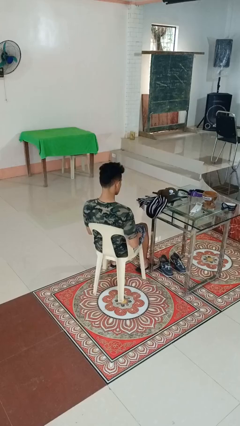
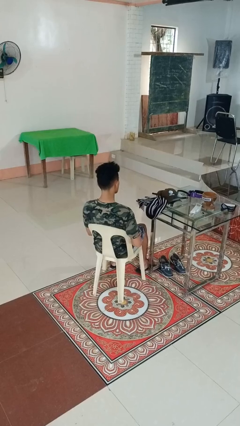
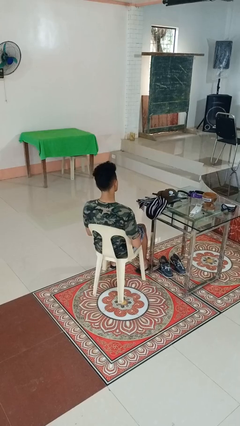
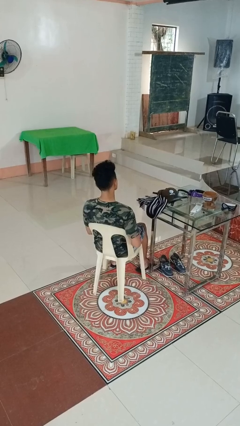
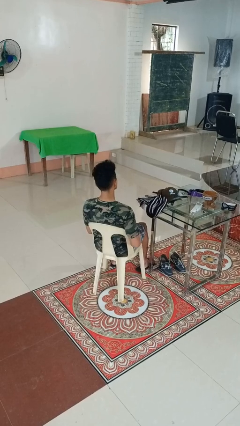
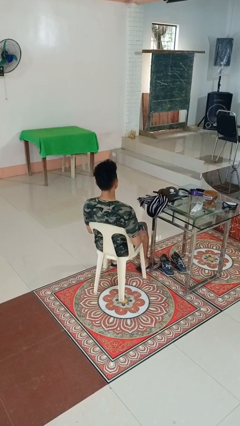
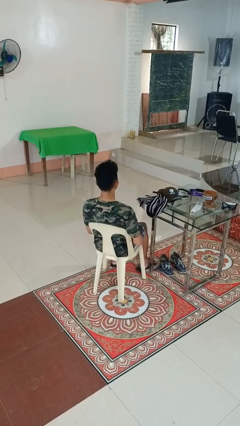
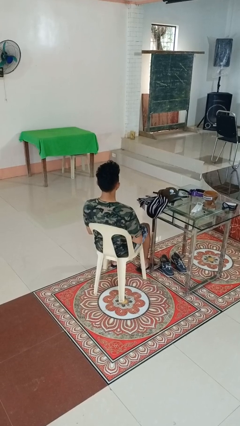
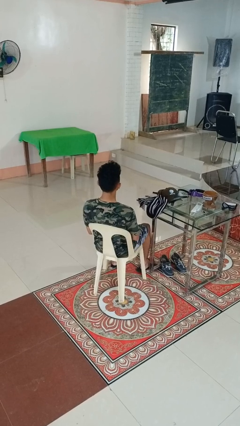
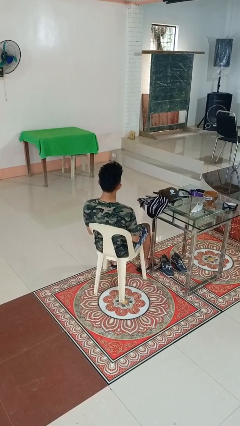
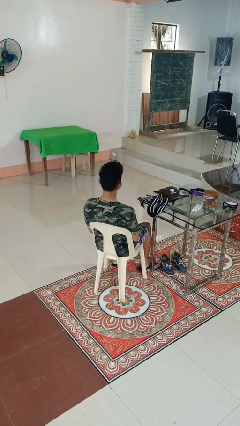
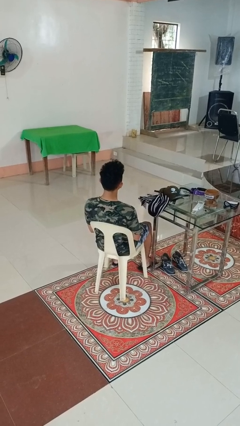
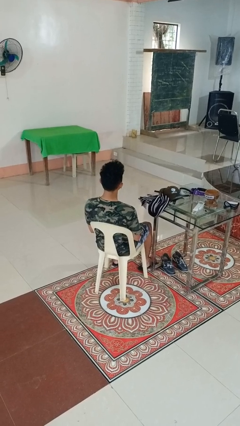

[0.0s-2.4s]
person puts phone into pocket

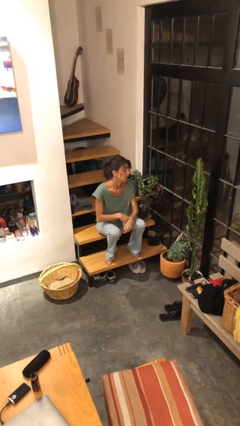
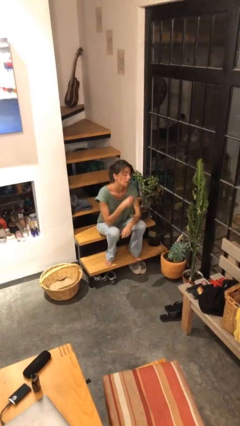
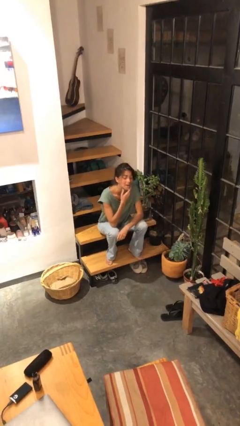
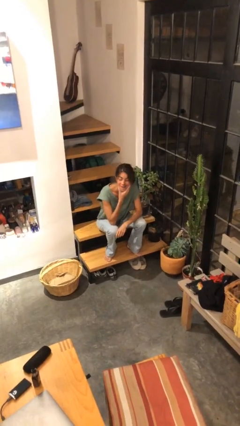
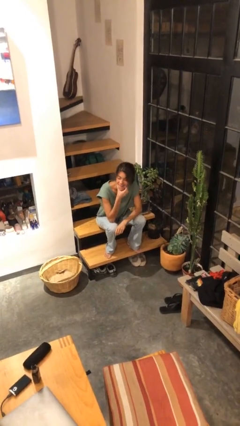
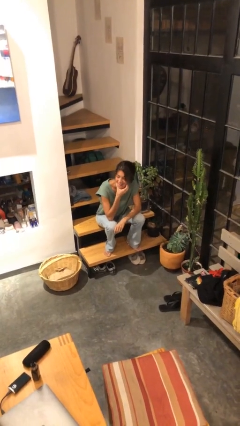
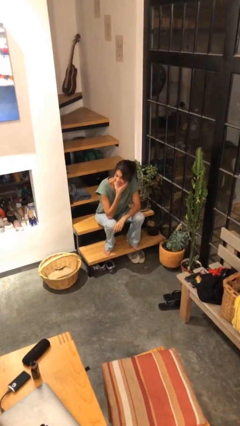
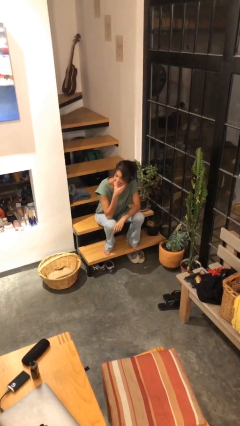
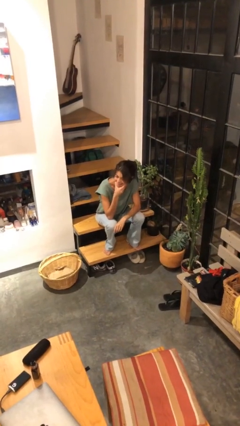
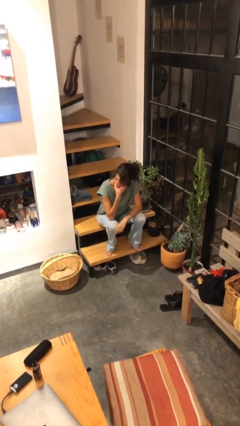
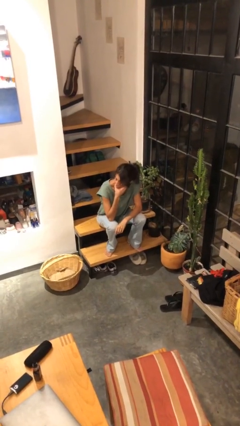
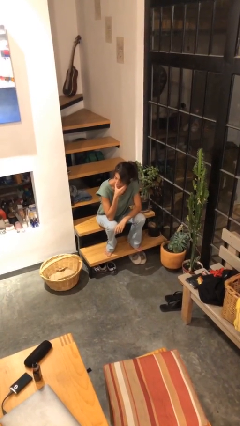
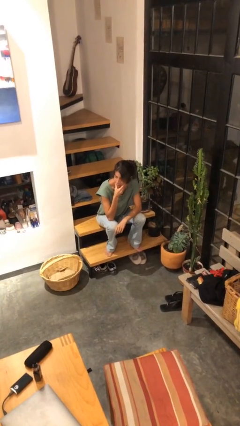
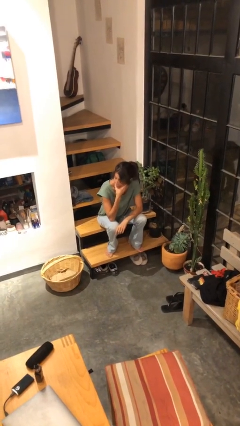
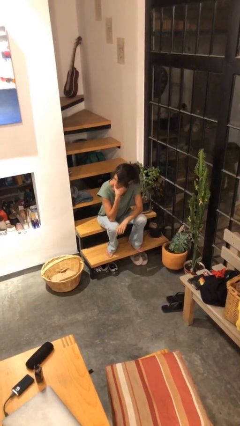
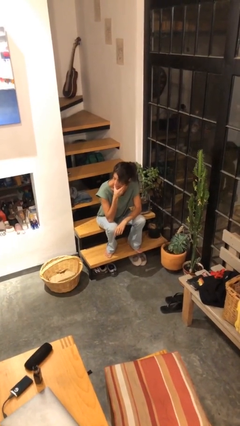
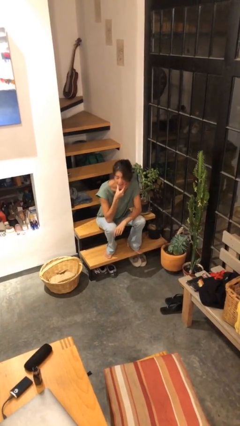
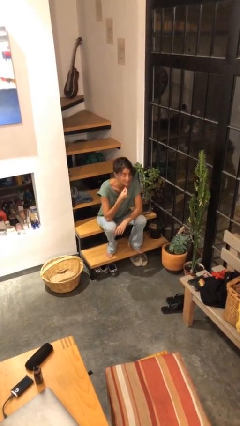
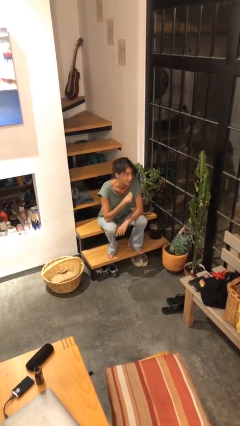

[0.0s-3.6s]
person scratches face

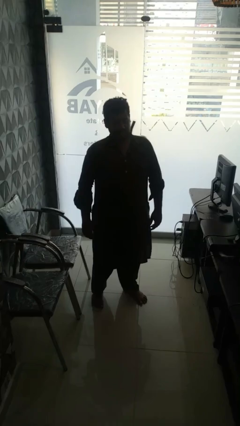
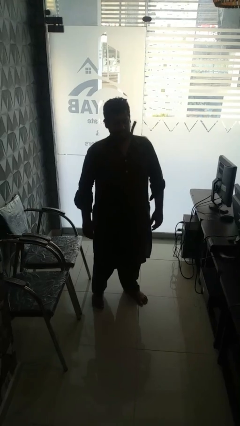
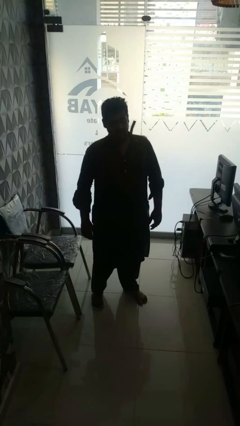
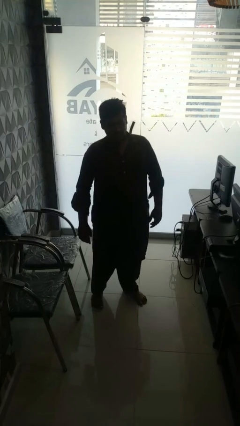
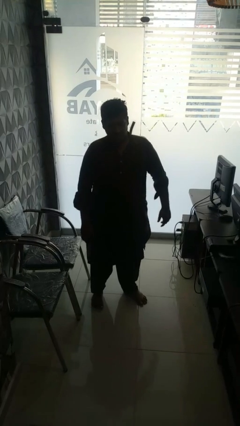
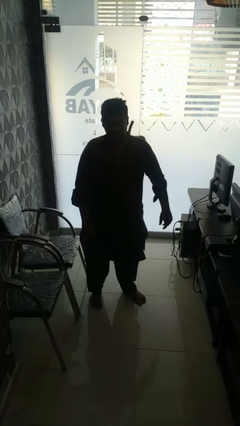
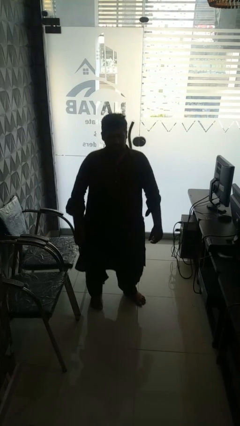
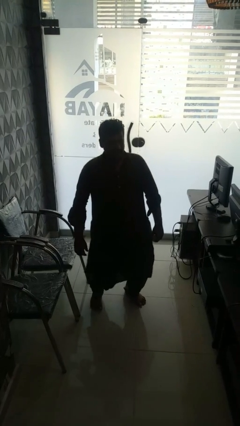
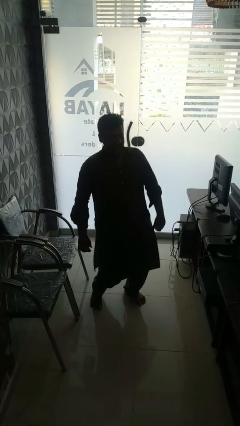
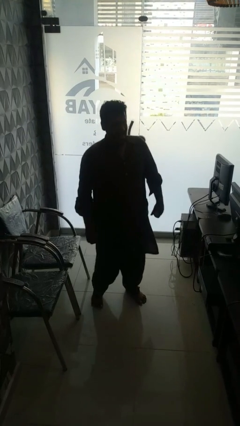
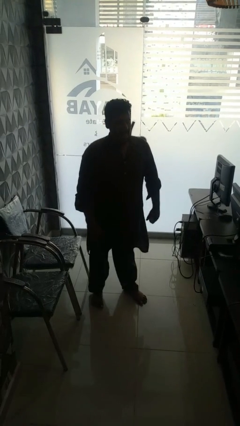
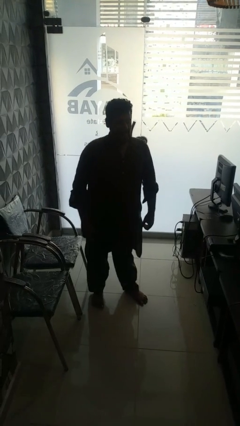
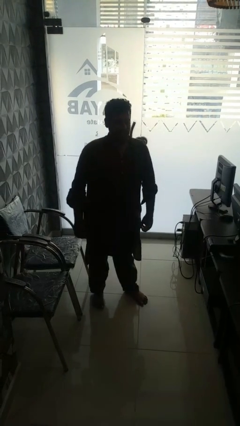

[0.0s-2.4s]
person wiggles hips

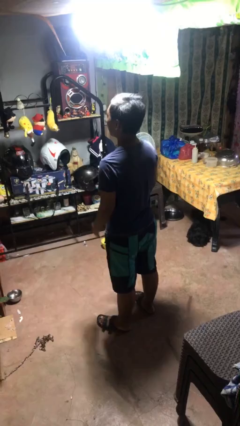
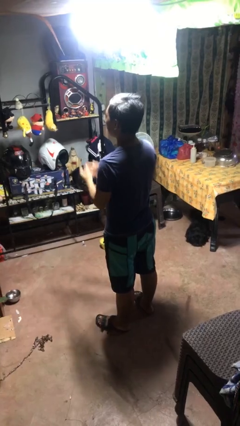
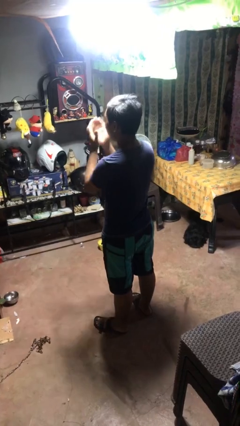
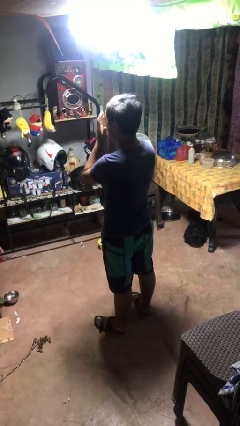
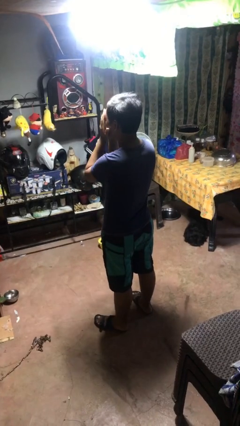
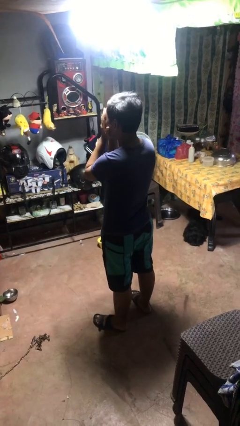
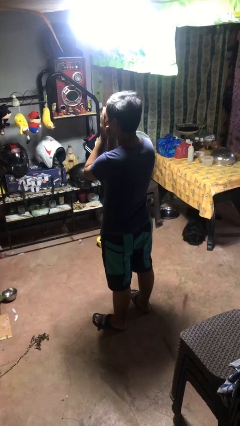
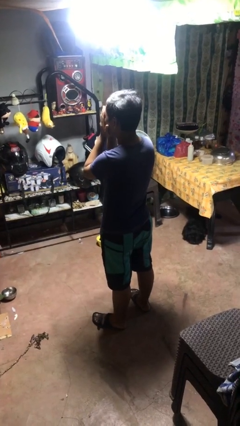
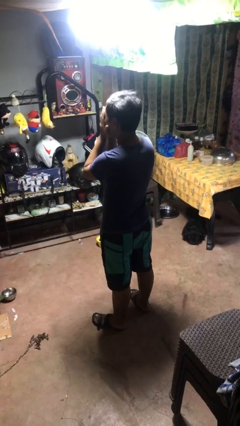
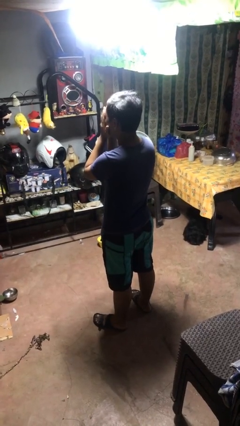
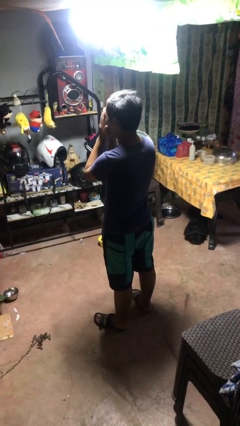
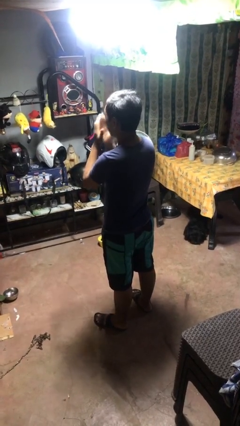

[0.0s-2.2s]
person covers face with hands

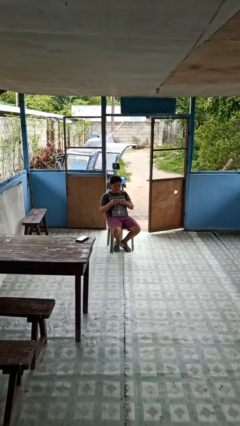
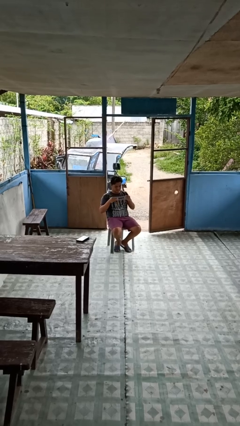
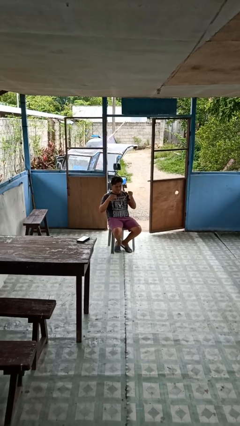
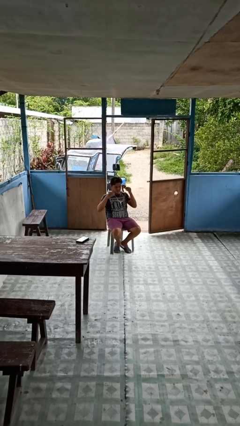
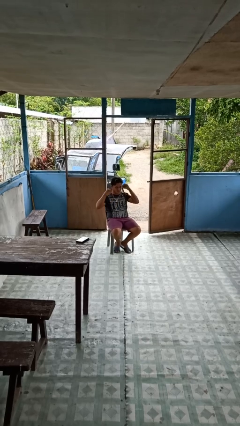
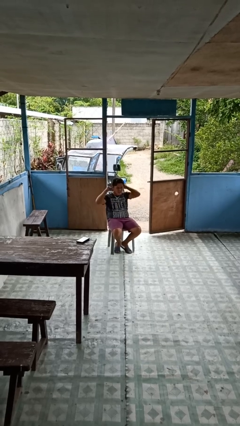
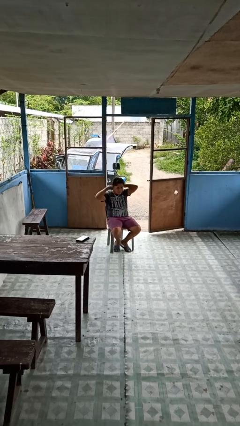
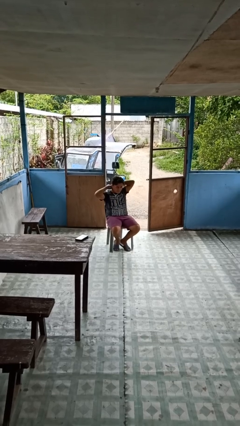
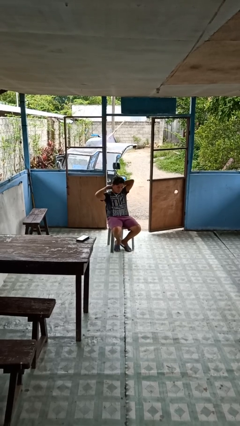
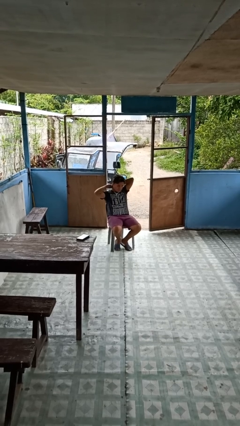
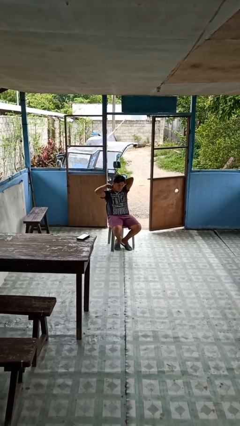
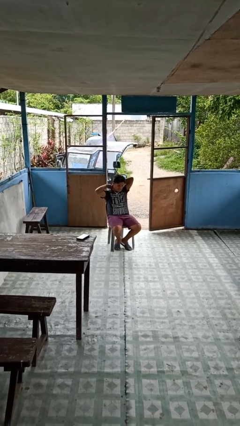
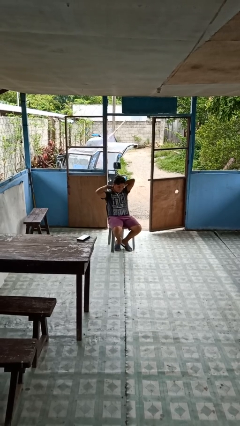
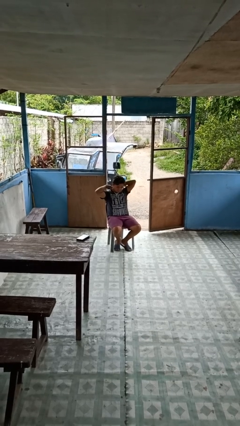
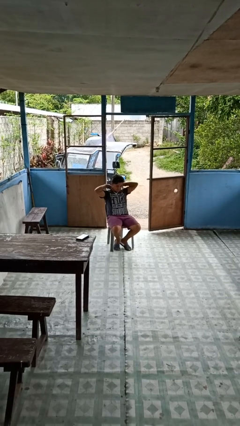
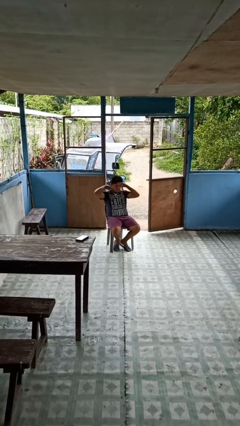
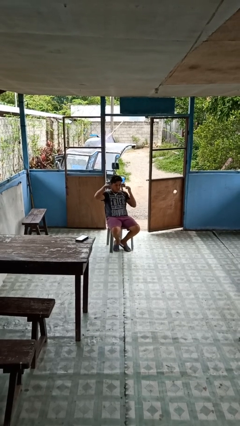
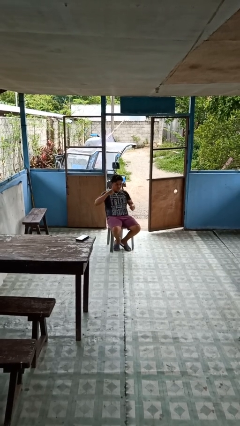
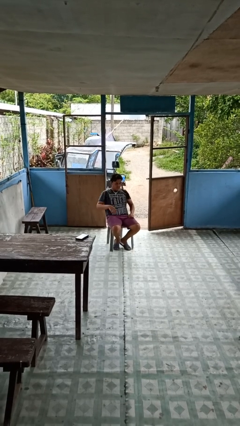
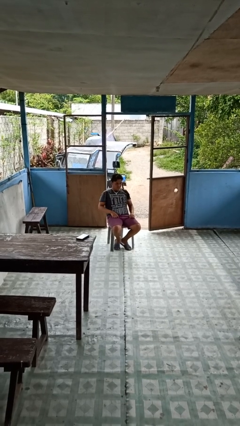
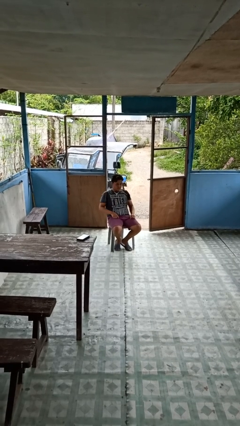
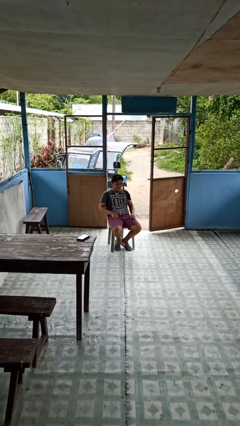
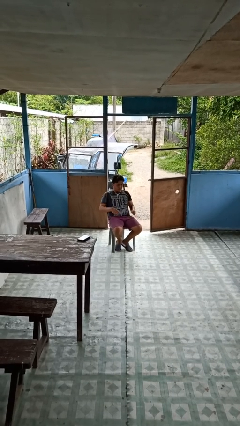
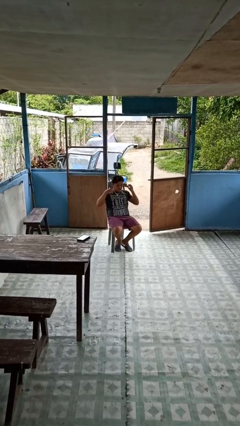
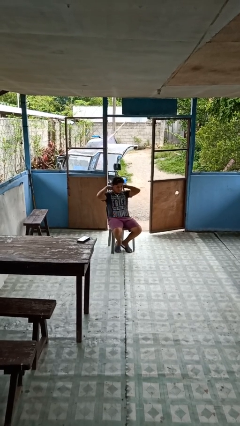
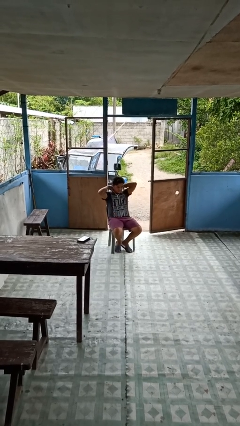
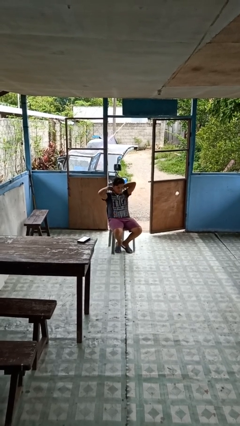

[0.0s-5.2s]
person puts on necklace

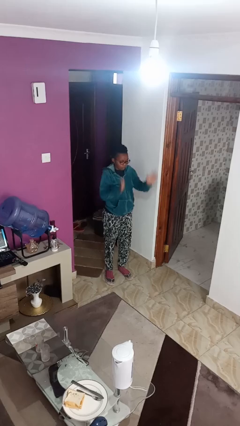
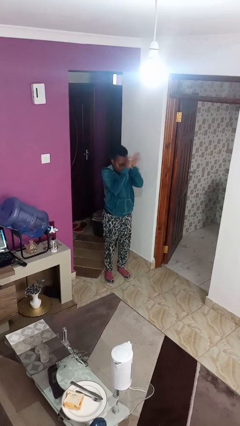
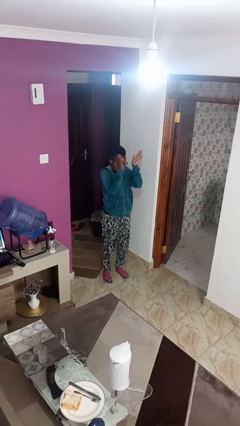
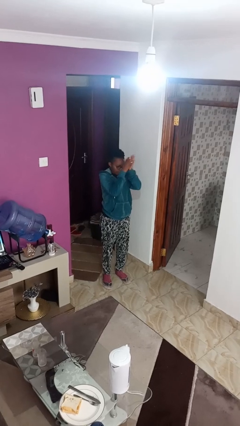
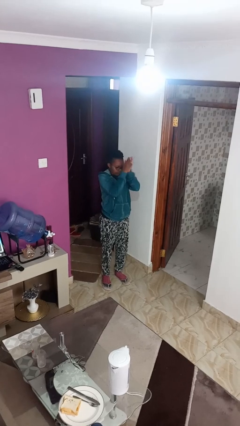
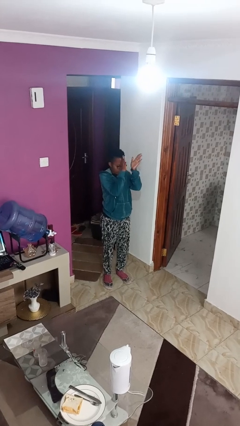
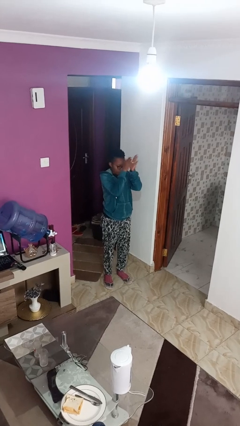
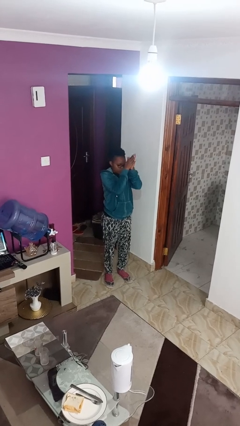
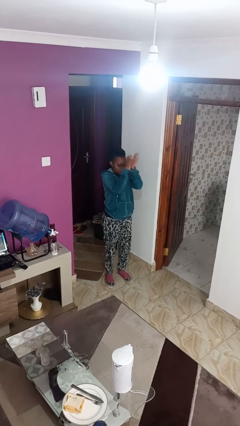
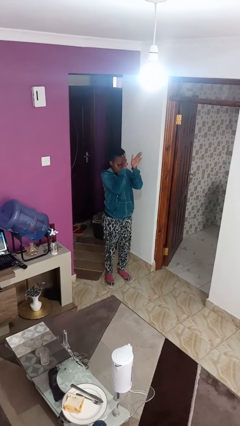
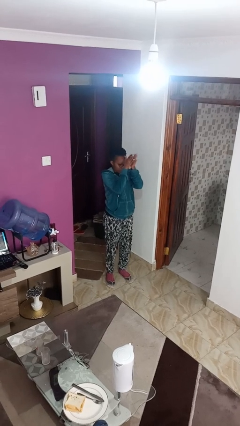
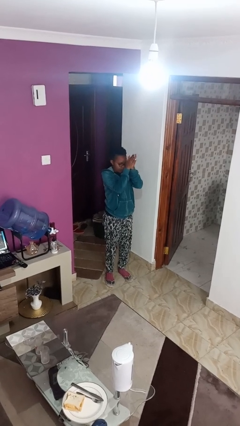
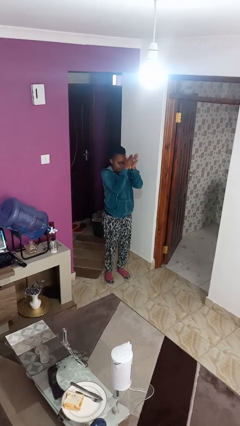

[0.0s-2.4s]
person claps hands
